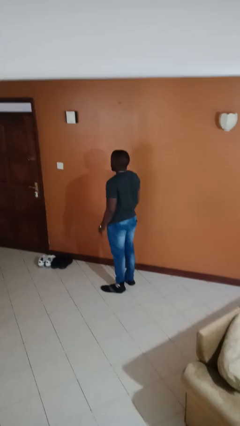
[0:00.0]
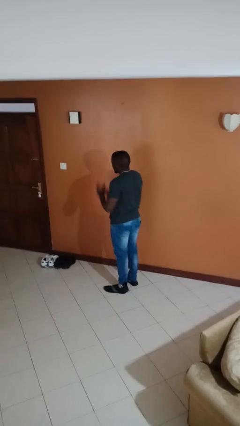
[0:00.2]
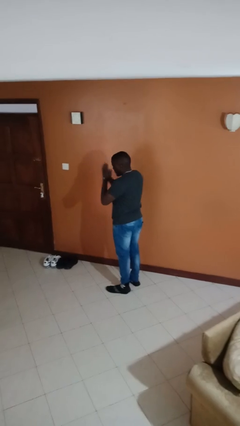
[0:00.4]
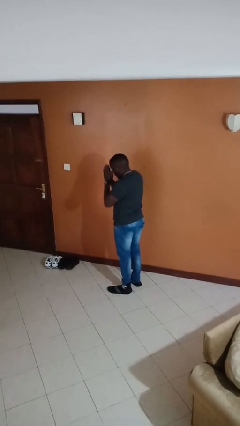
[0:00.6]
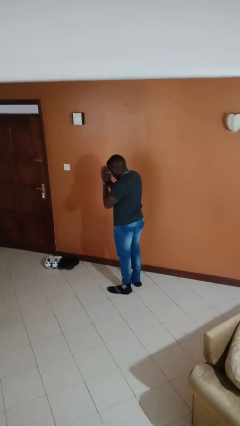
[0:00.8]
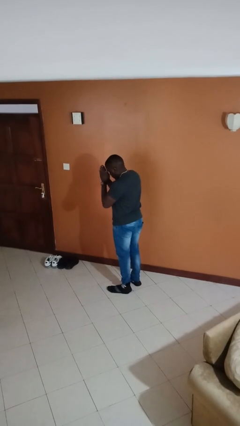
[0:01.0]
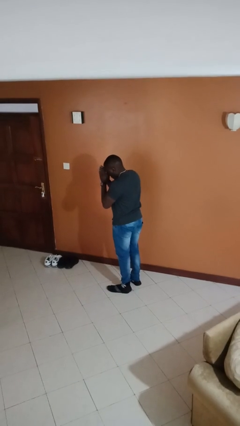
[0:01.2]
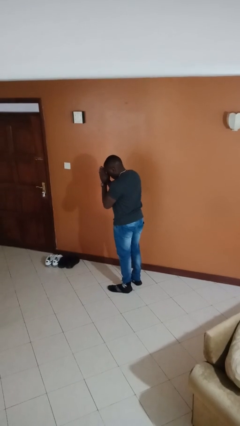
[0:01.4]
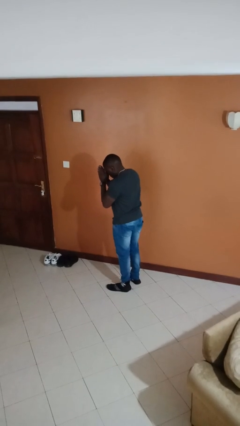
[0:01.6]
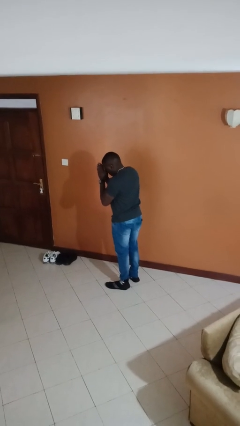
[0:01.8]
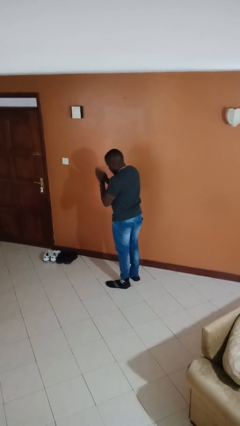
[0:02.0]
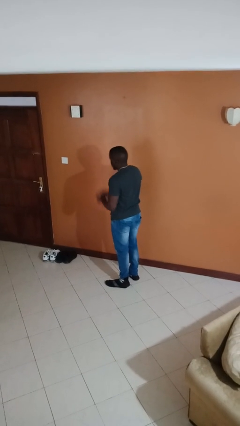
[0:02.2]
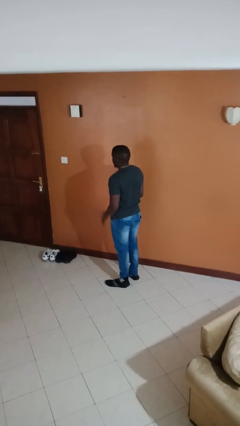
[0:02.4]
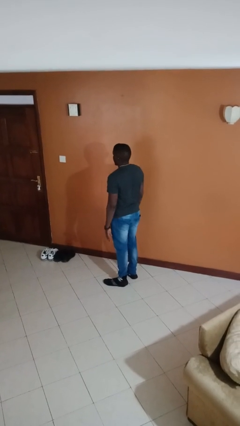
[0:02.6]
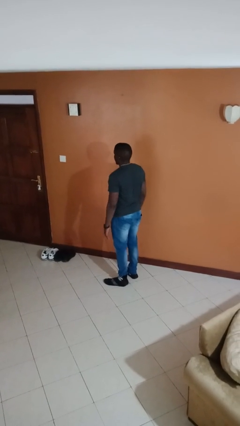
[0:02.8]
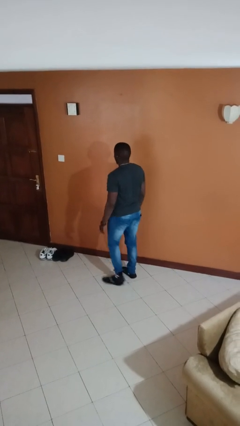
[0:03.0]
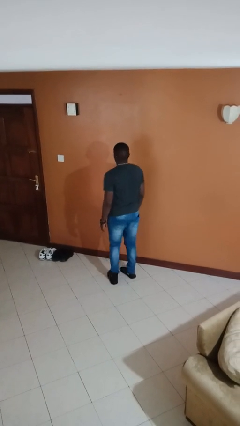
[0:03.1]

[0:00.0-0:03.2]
person prays

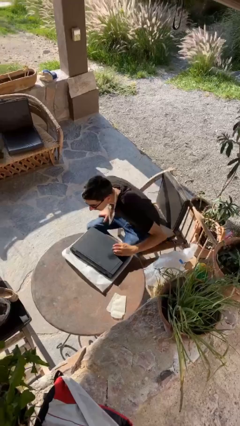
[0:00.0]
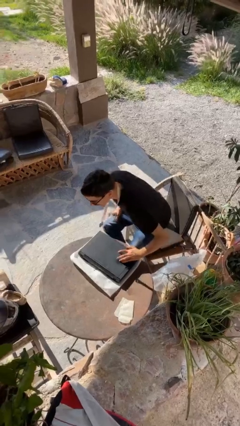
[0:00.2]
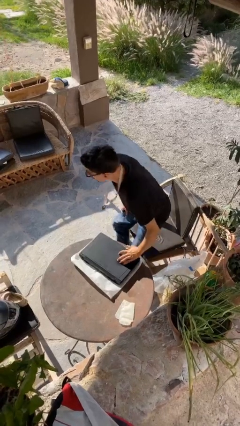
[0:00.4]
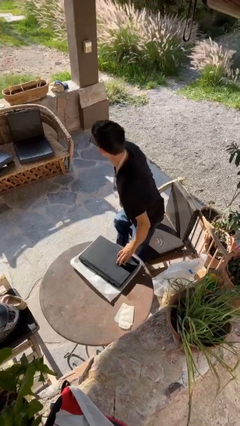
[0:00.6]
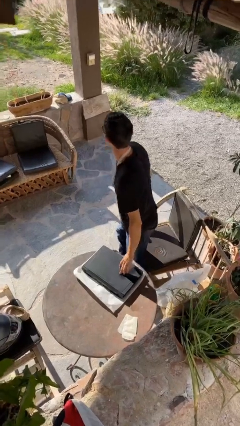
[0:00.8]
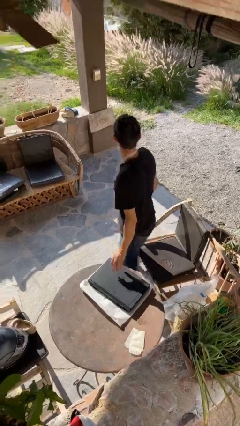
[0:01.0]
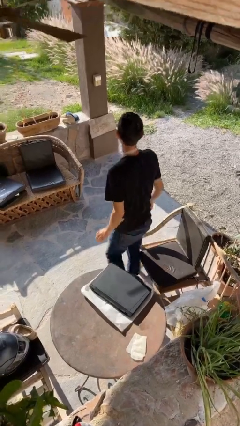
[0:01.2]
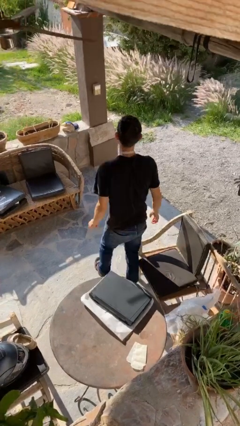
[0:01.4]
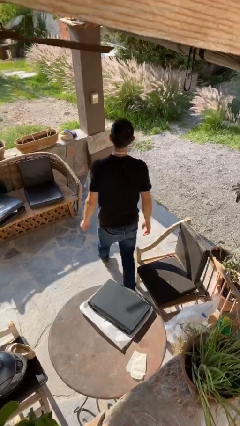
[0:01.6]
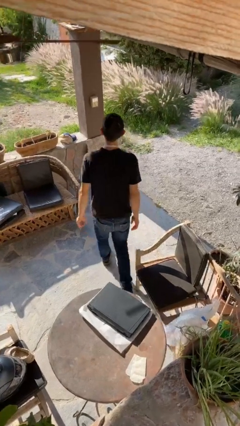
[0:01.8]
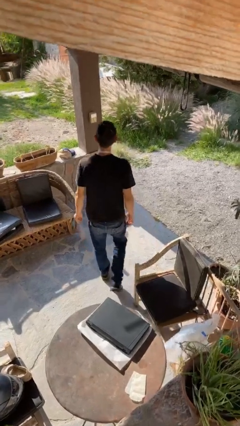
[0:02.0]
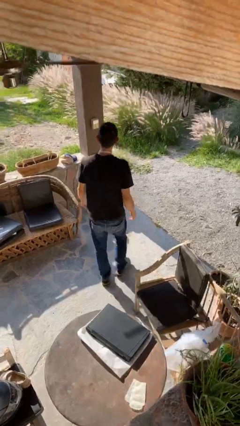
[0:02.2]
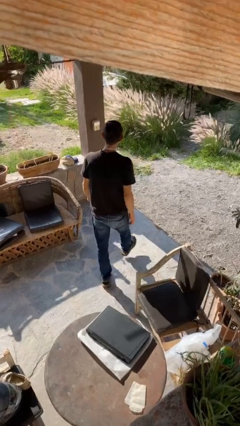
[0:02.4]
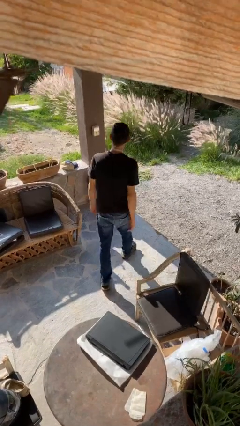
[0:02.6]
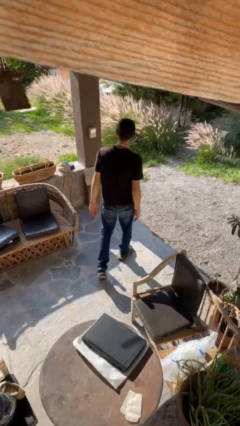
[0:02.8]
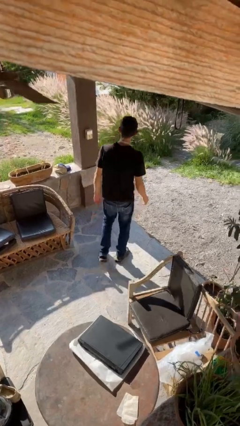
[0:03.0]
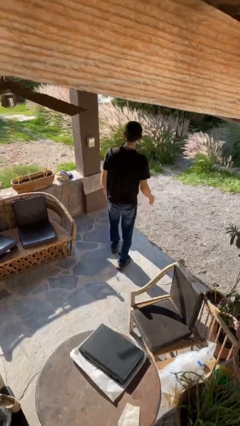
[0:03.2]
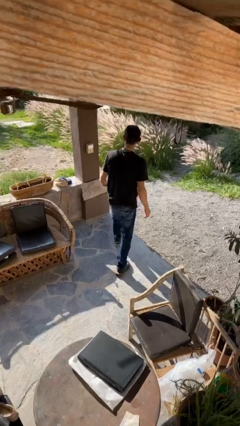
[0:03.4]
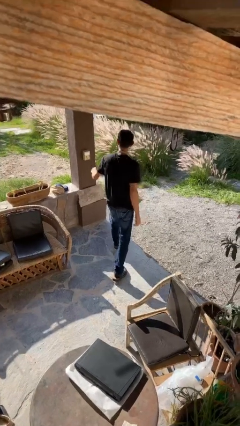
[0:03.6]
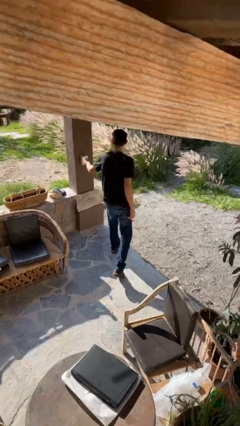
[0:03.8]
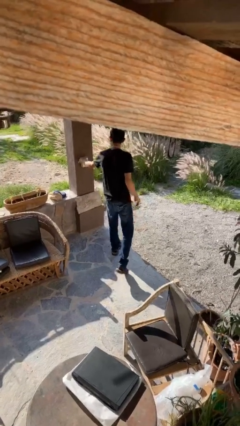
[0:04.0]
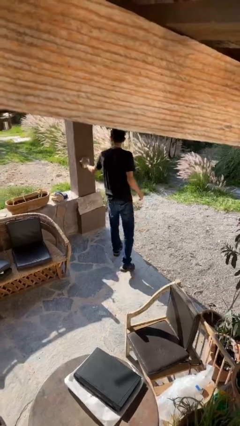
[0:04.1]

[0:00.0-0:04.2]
person stands up

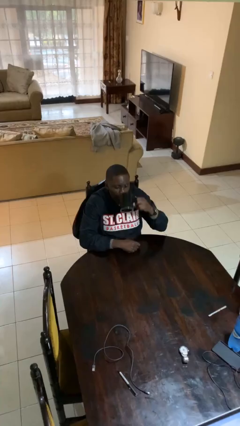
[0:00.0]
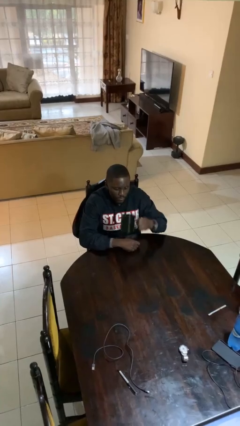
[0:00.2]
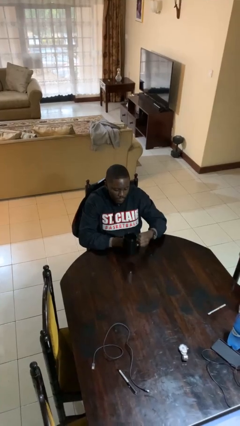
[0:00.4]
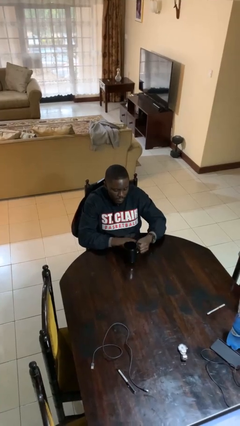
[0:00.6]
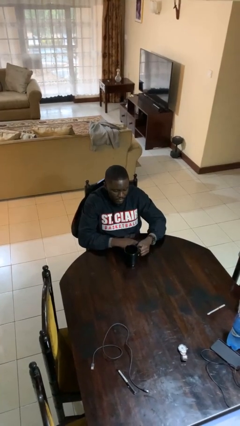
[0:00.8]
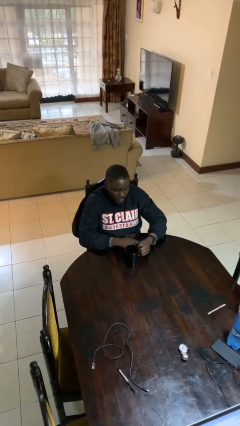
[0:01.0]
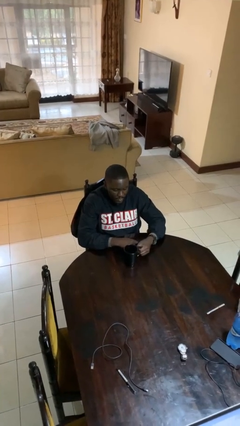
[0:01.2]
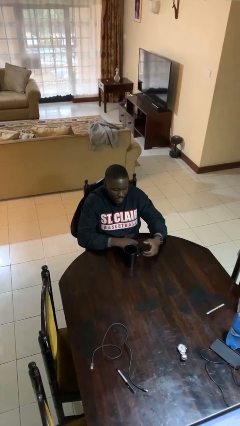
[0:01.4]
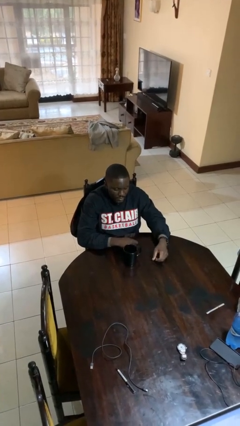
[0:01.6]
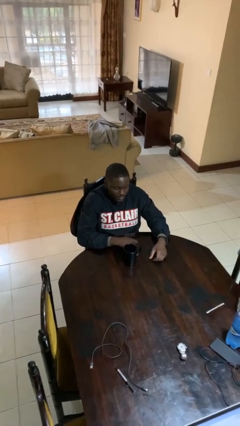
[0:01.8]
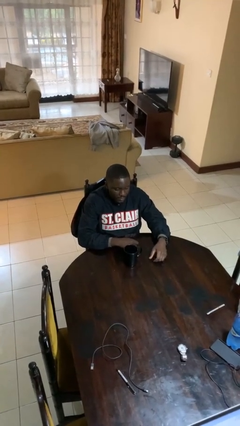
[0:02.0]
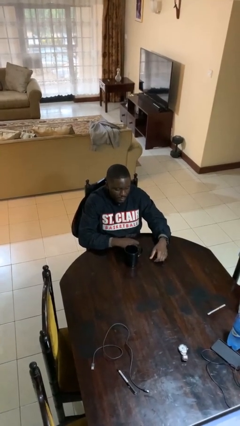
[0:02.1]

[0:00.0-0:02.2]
person puts down object on table

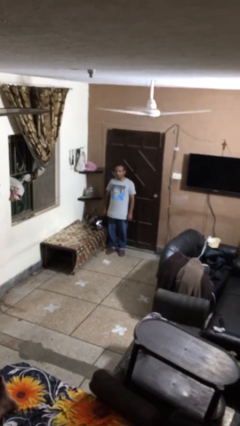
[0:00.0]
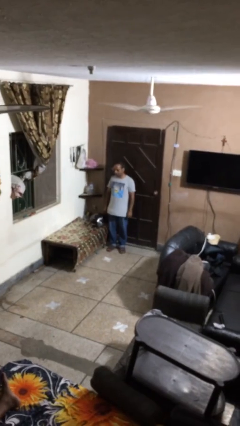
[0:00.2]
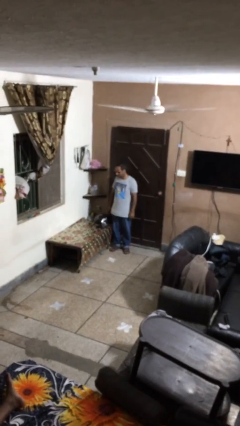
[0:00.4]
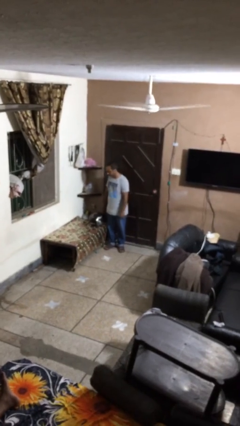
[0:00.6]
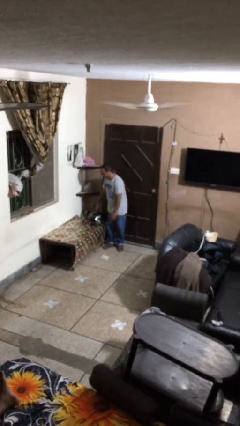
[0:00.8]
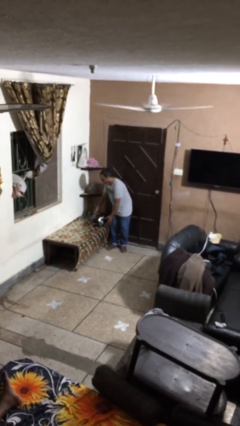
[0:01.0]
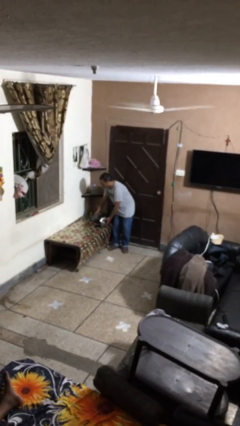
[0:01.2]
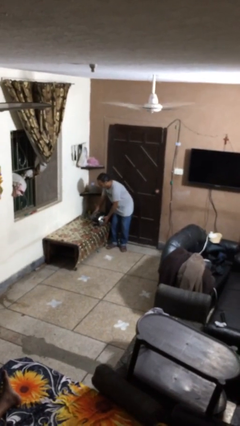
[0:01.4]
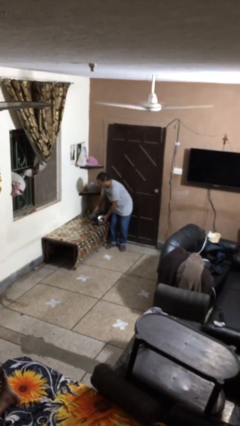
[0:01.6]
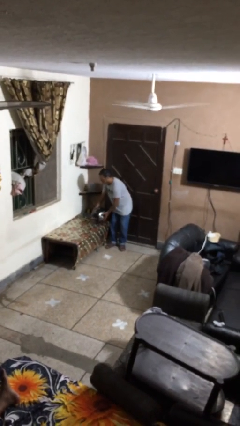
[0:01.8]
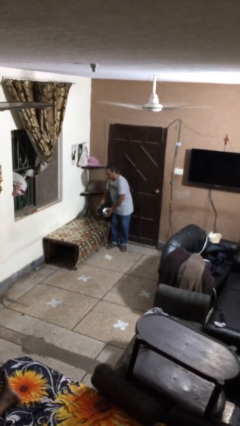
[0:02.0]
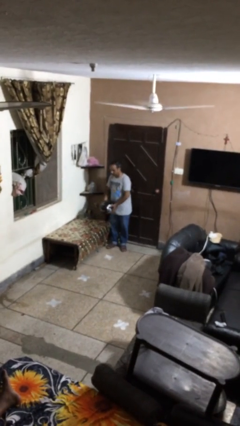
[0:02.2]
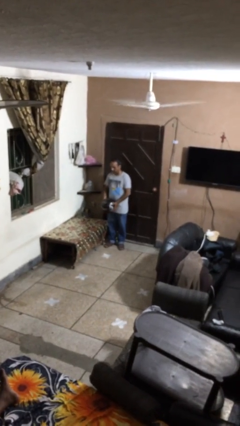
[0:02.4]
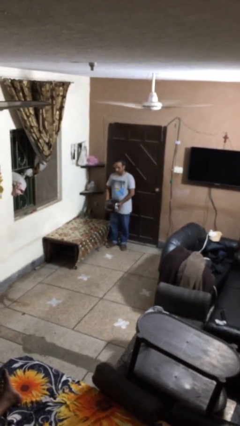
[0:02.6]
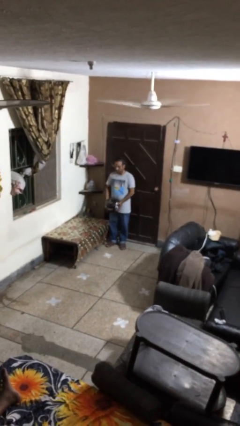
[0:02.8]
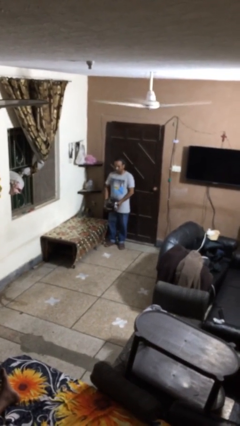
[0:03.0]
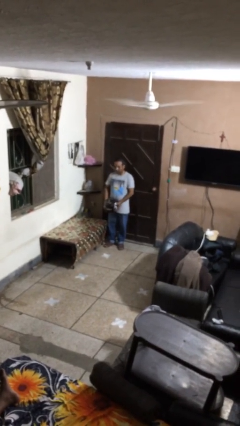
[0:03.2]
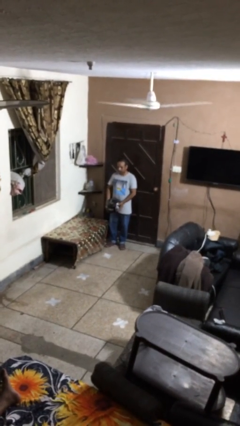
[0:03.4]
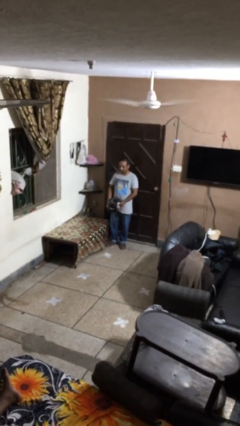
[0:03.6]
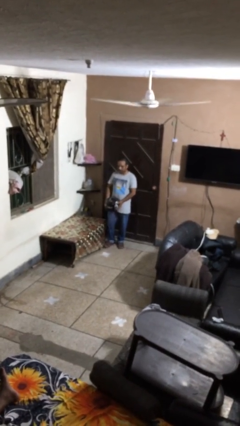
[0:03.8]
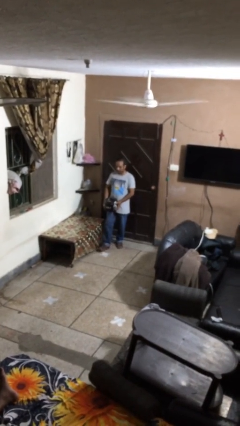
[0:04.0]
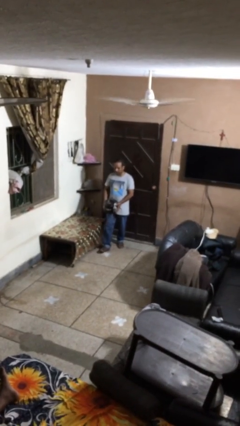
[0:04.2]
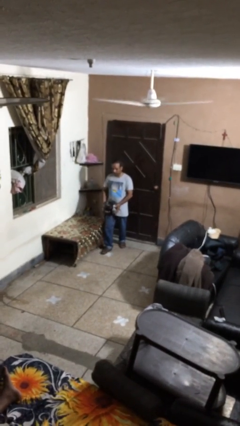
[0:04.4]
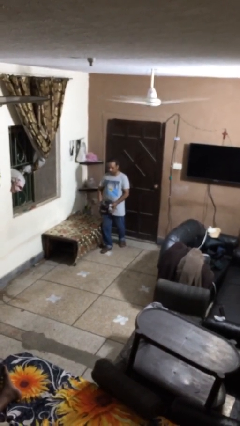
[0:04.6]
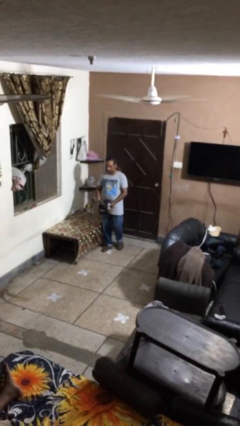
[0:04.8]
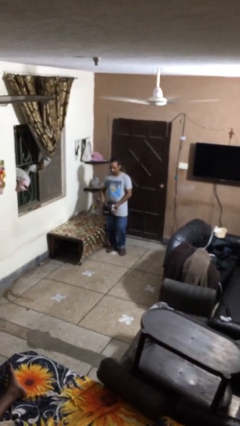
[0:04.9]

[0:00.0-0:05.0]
person picks up object from table

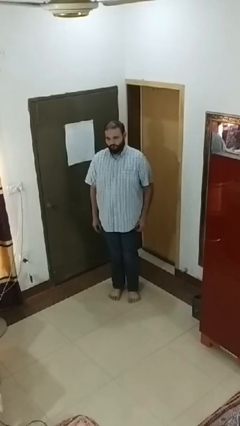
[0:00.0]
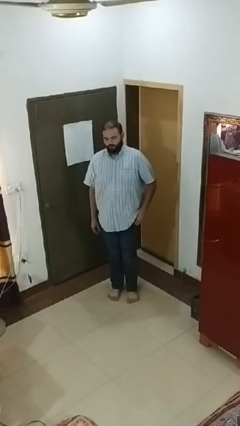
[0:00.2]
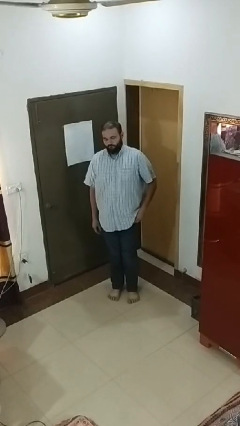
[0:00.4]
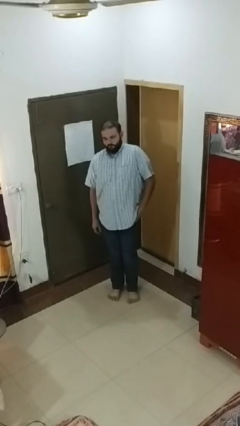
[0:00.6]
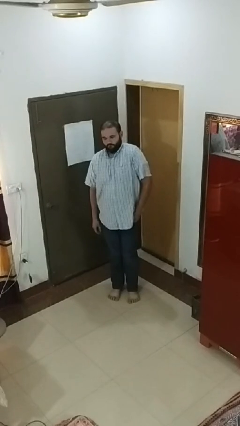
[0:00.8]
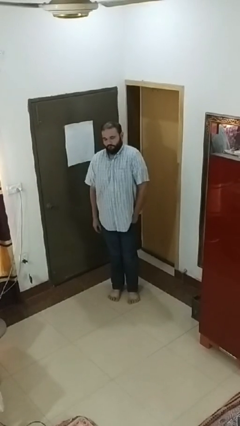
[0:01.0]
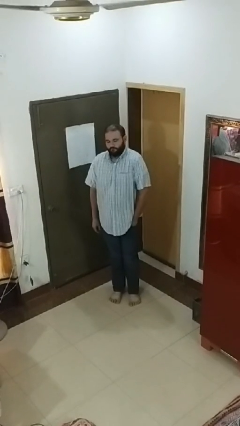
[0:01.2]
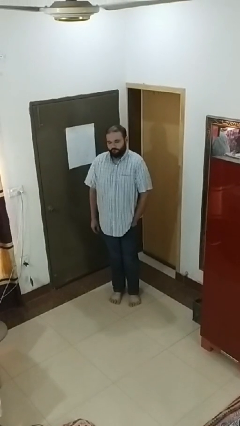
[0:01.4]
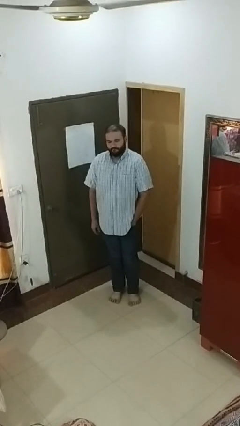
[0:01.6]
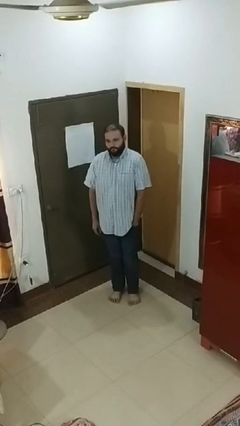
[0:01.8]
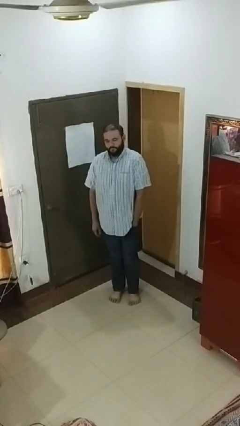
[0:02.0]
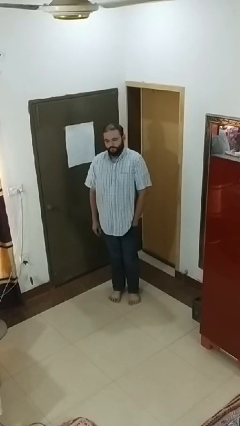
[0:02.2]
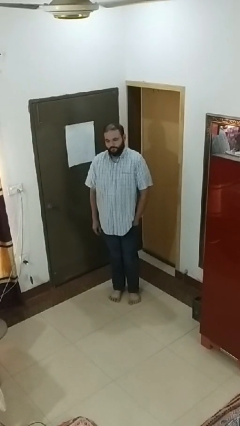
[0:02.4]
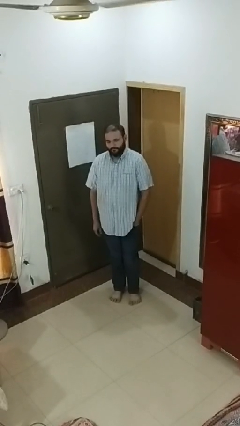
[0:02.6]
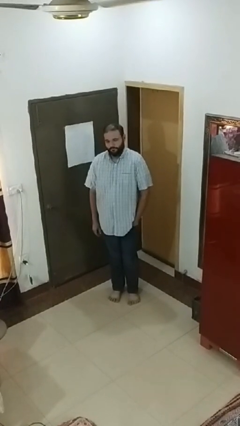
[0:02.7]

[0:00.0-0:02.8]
person puts hands in back pockets

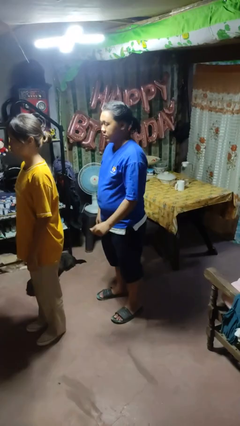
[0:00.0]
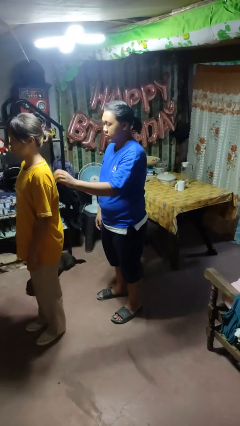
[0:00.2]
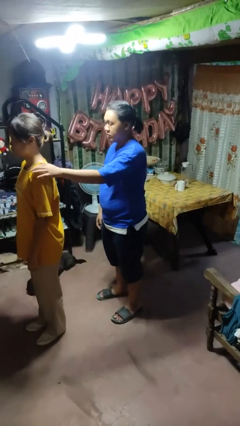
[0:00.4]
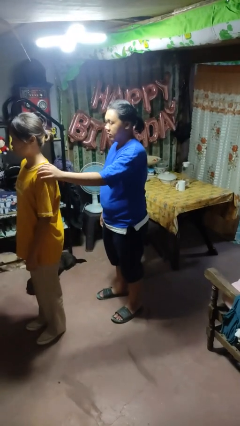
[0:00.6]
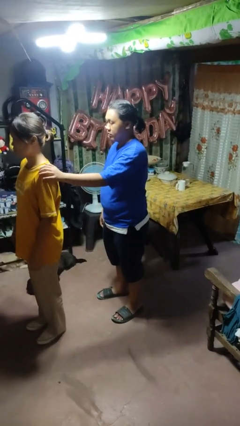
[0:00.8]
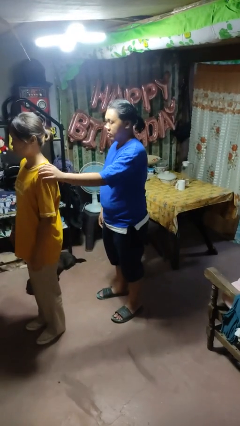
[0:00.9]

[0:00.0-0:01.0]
person grabs person by shoulder
